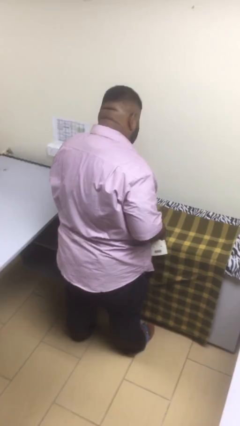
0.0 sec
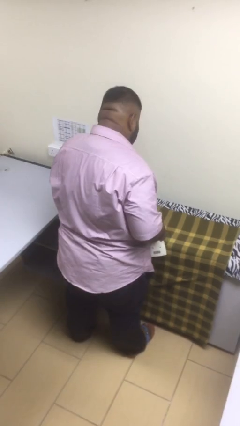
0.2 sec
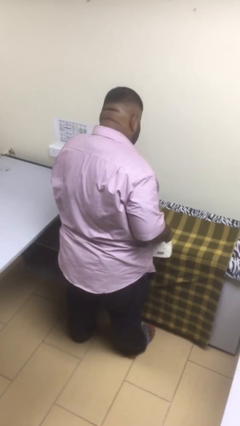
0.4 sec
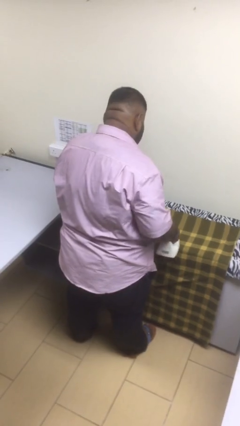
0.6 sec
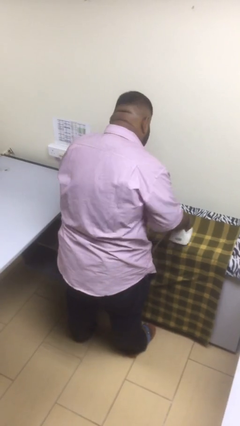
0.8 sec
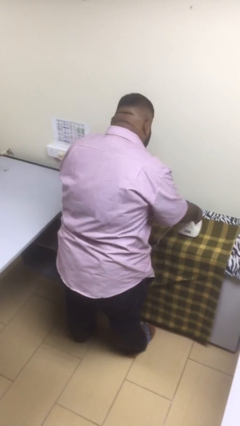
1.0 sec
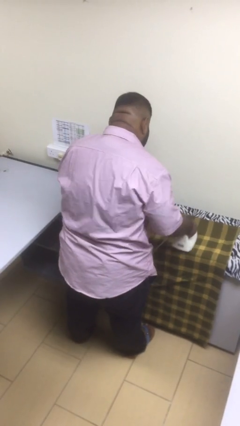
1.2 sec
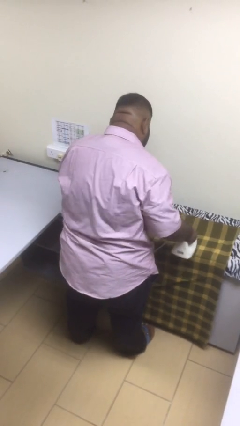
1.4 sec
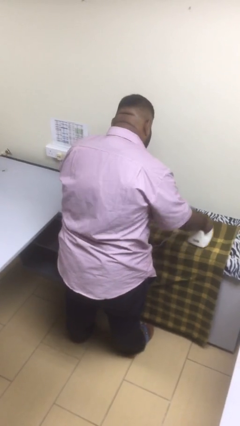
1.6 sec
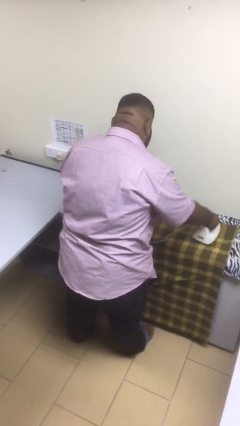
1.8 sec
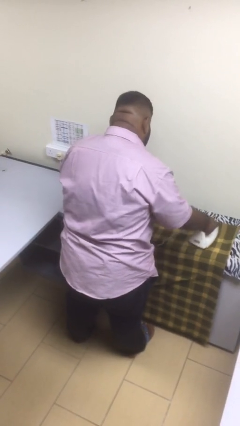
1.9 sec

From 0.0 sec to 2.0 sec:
person irons clothes

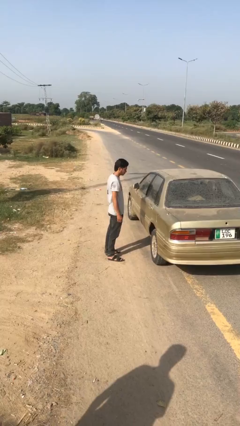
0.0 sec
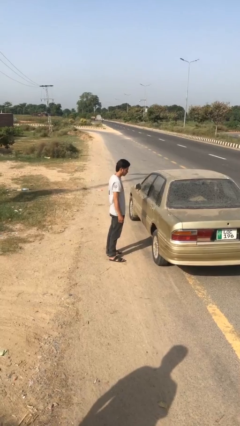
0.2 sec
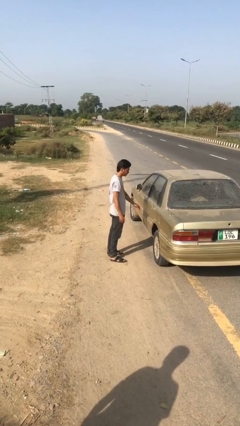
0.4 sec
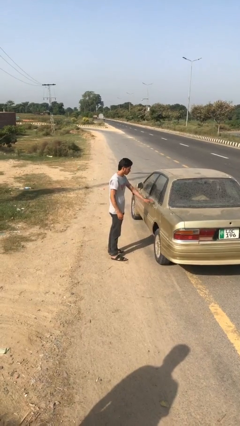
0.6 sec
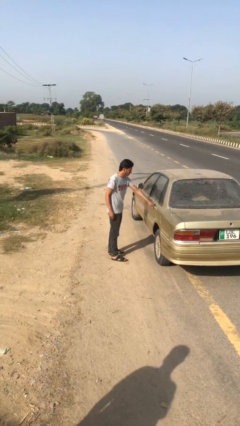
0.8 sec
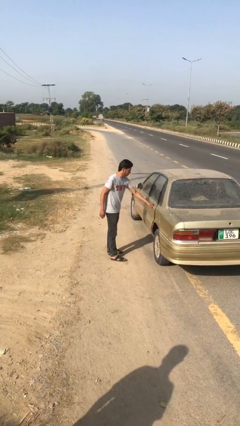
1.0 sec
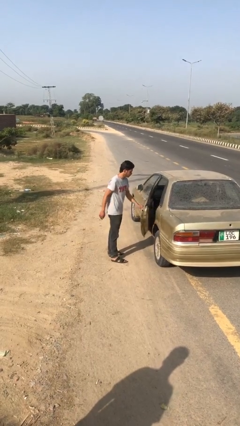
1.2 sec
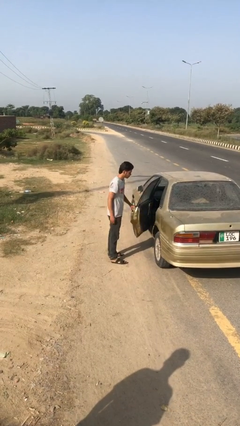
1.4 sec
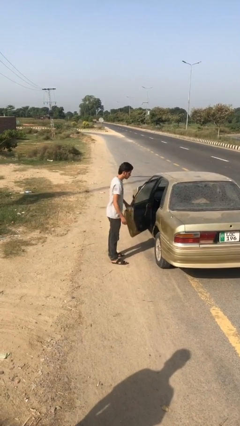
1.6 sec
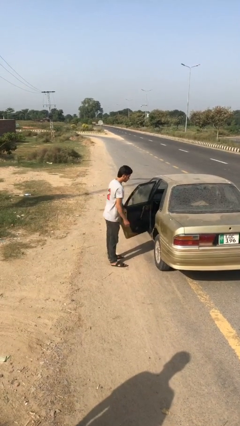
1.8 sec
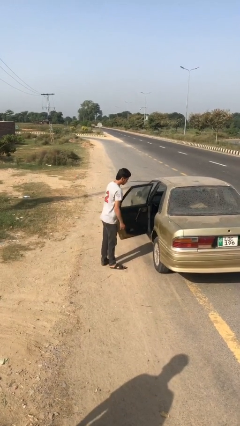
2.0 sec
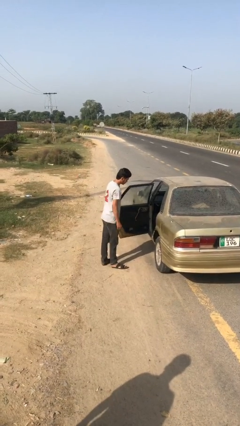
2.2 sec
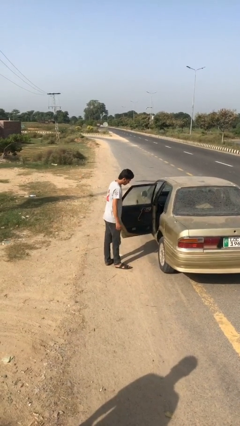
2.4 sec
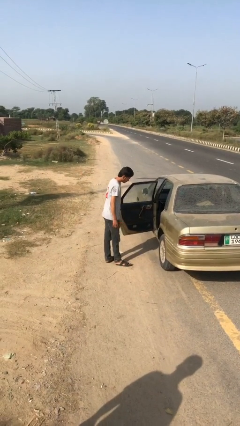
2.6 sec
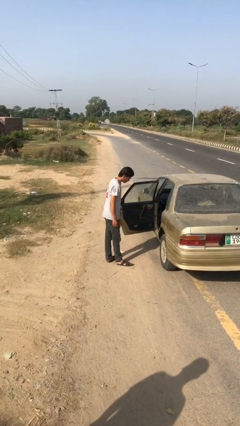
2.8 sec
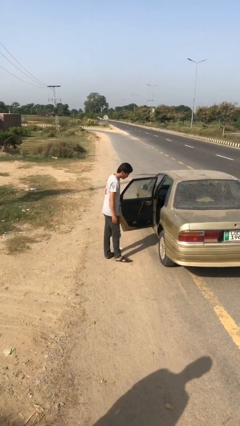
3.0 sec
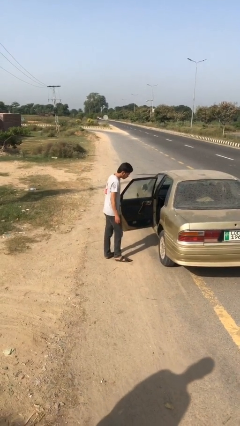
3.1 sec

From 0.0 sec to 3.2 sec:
person opens car door

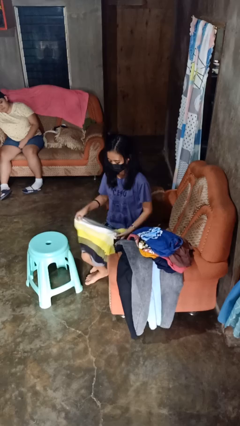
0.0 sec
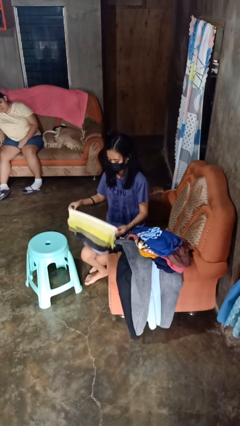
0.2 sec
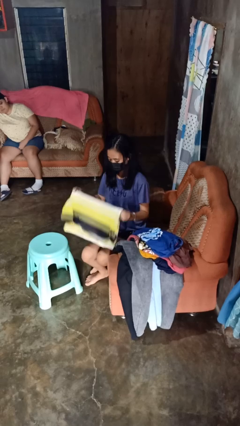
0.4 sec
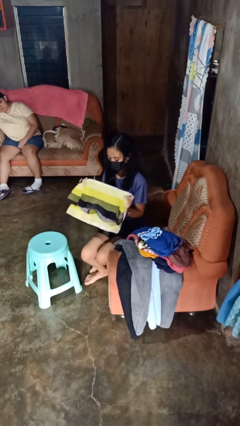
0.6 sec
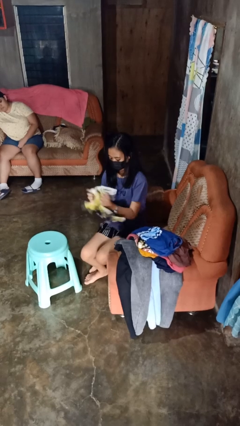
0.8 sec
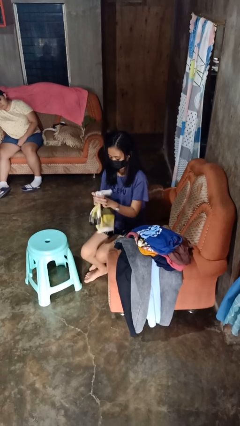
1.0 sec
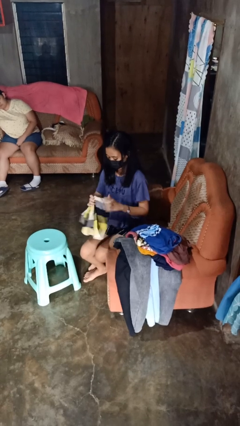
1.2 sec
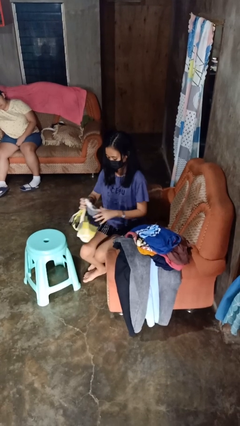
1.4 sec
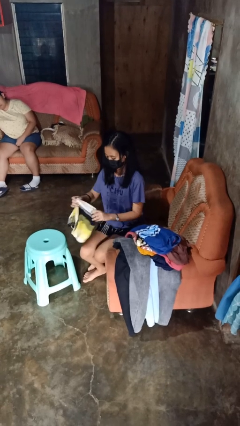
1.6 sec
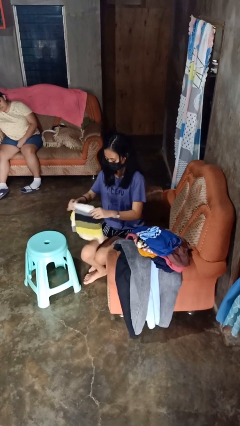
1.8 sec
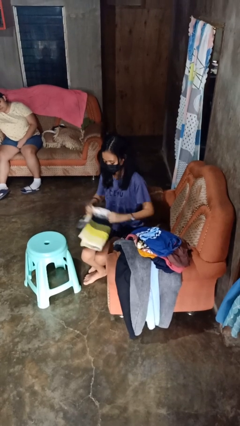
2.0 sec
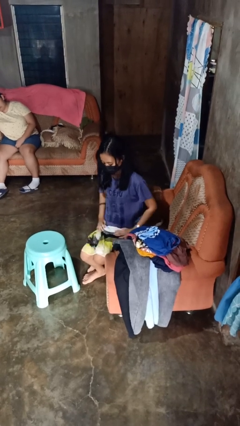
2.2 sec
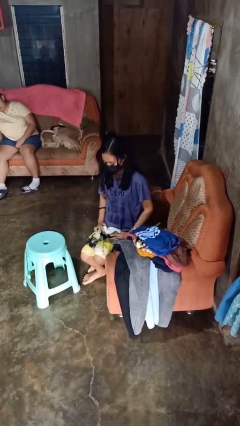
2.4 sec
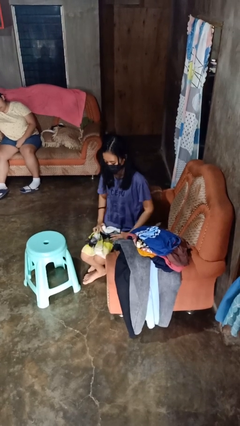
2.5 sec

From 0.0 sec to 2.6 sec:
person folds shirt

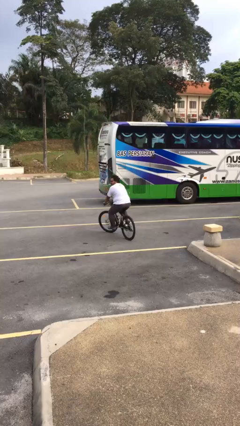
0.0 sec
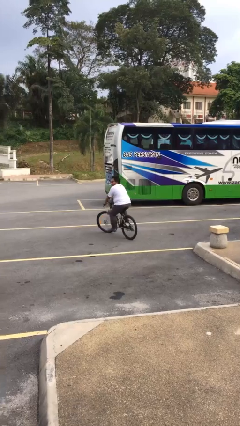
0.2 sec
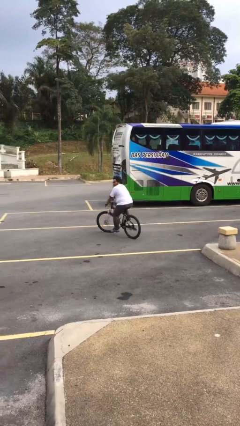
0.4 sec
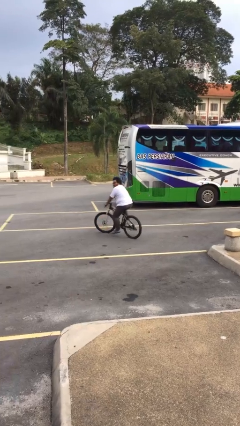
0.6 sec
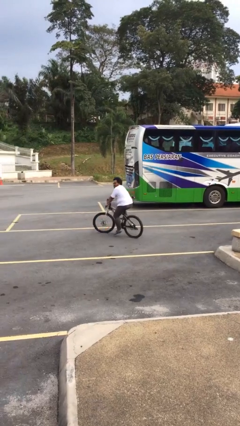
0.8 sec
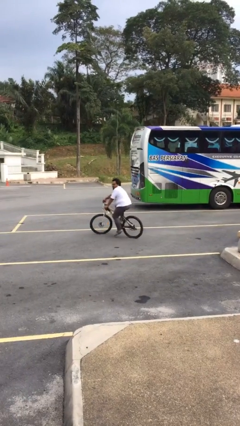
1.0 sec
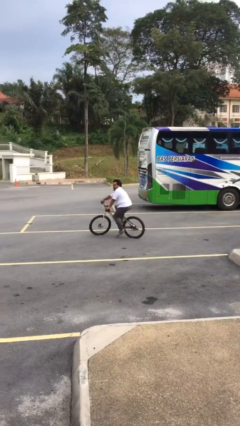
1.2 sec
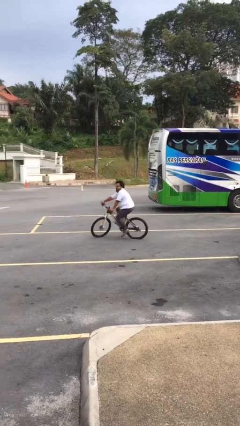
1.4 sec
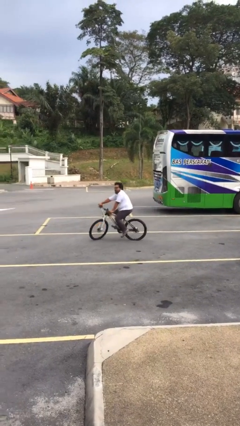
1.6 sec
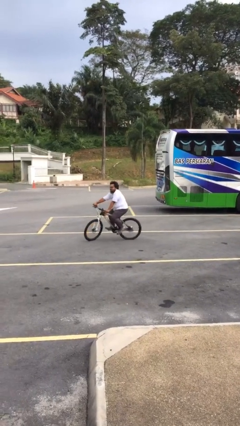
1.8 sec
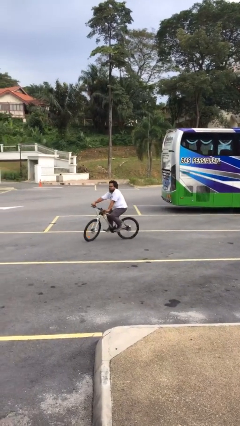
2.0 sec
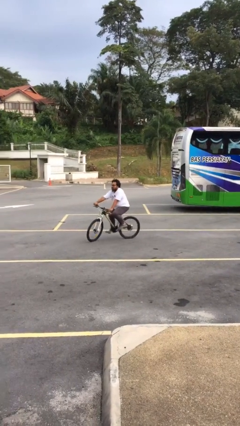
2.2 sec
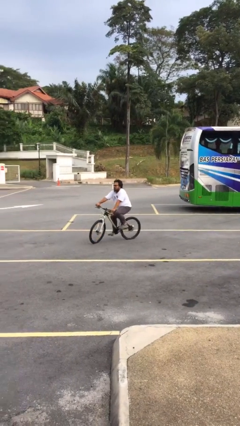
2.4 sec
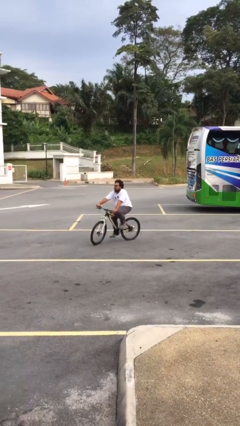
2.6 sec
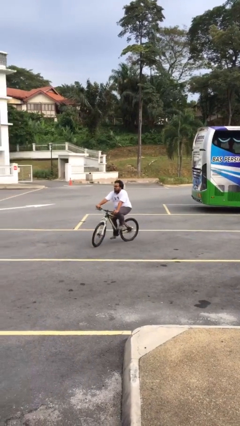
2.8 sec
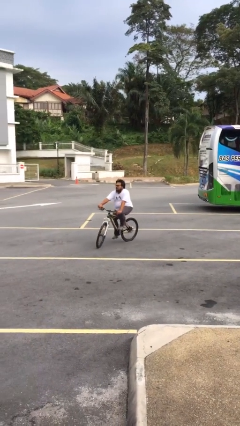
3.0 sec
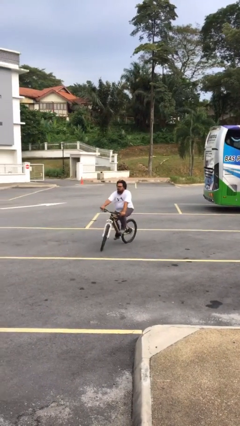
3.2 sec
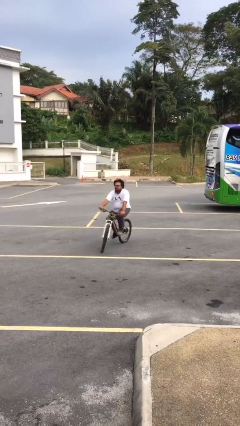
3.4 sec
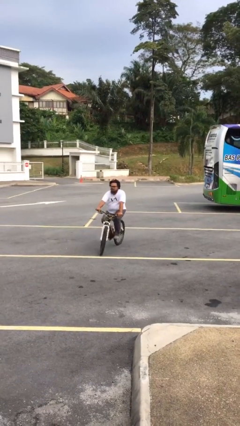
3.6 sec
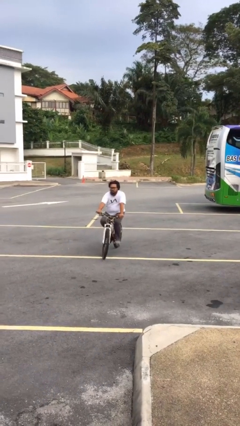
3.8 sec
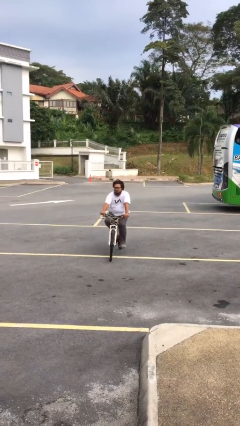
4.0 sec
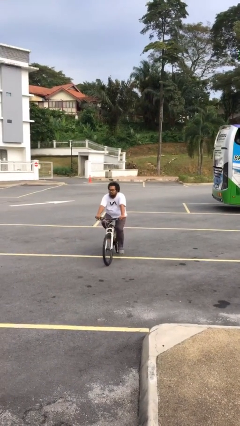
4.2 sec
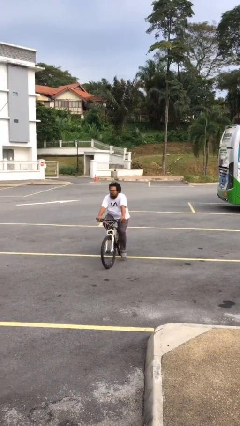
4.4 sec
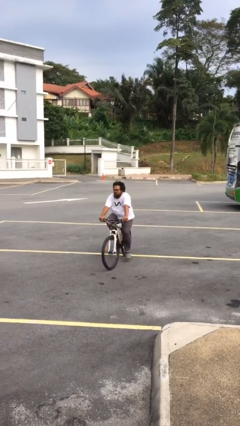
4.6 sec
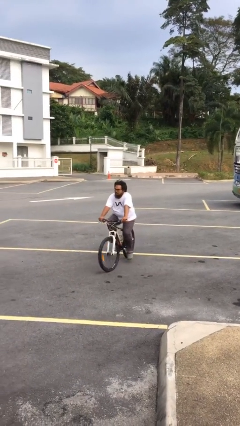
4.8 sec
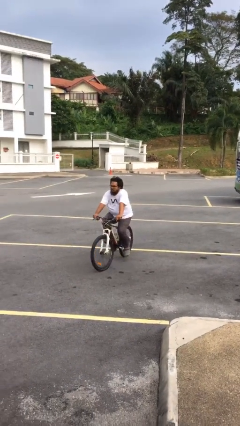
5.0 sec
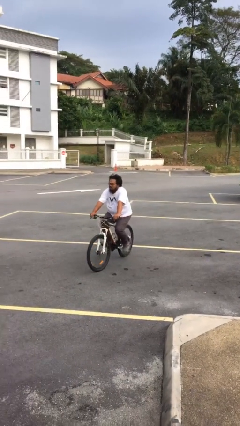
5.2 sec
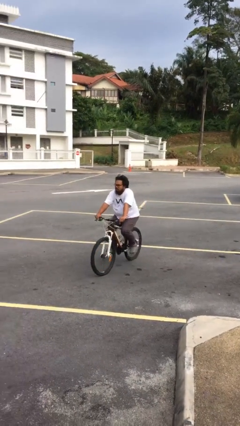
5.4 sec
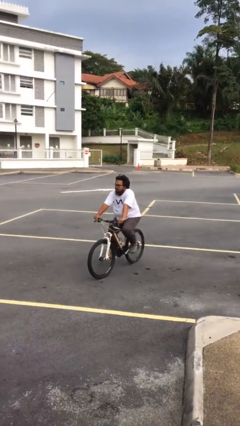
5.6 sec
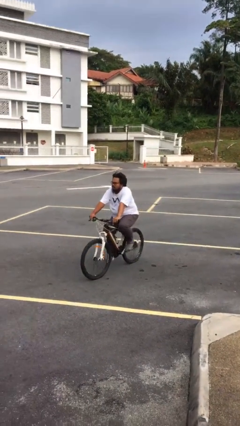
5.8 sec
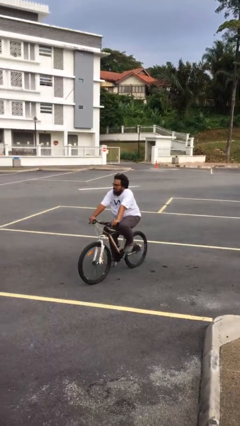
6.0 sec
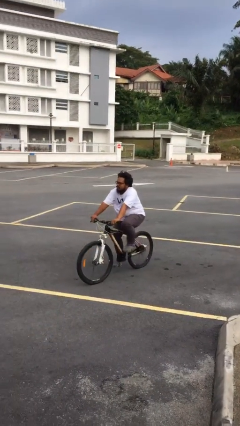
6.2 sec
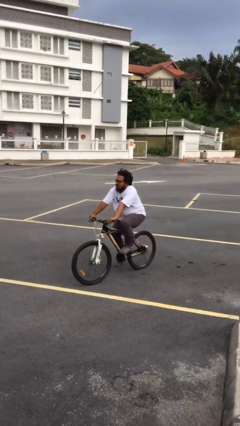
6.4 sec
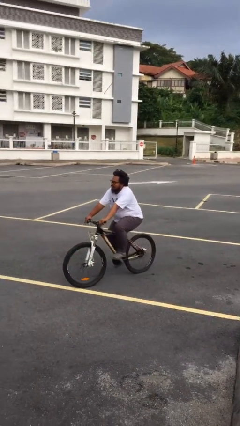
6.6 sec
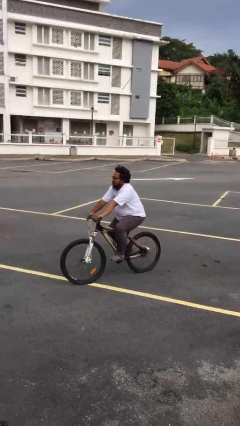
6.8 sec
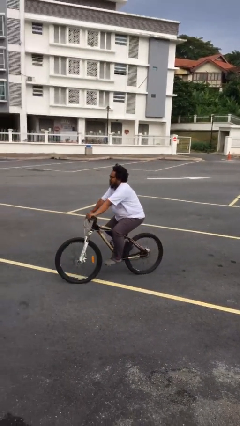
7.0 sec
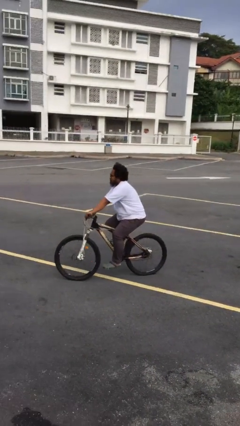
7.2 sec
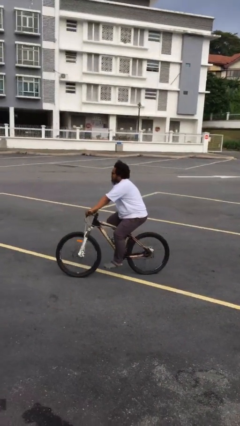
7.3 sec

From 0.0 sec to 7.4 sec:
person rides bicycle

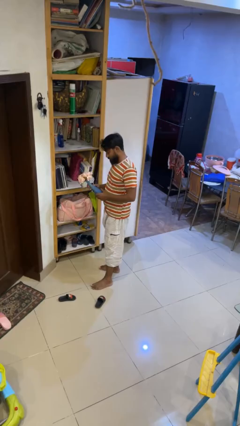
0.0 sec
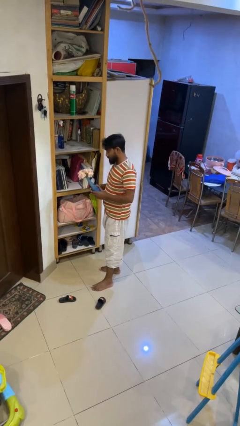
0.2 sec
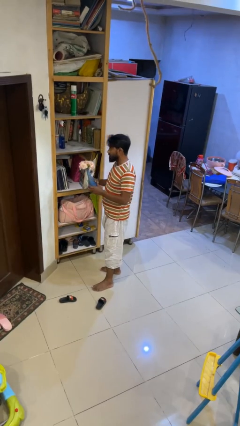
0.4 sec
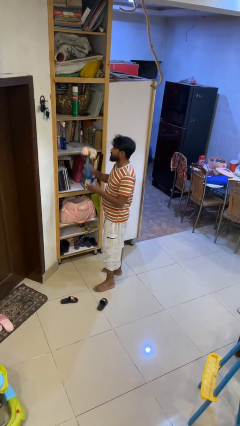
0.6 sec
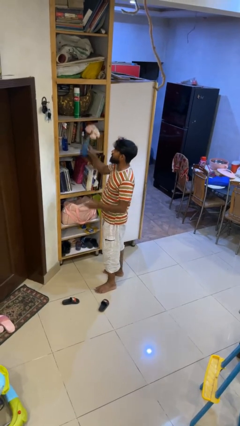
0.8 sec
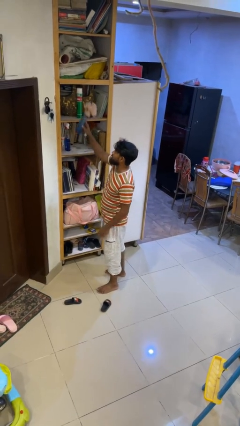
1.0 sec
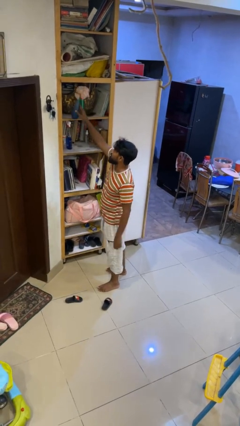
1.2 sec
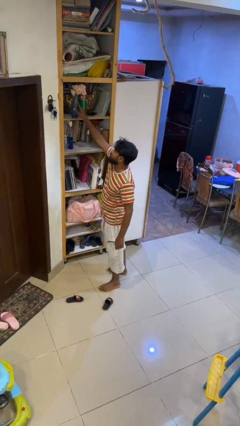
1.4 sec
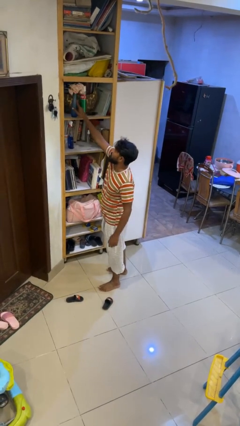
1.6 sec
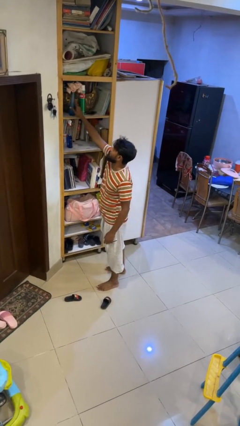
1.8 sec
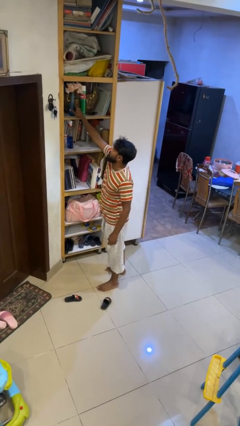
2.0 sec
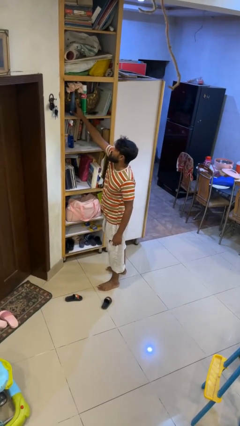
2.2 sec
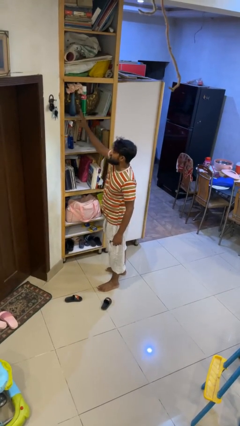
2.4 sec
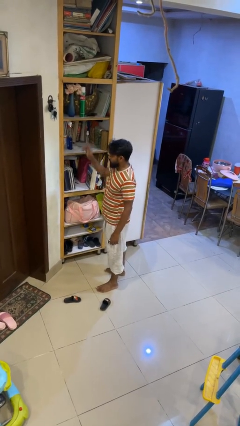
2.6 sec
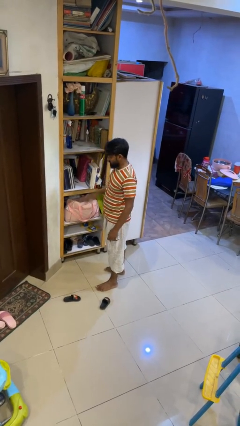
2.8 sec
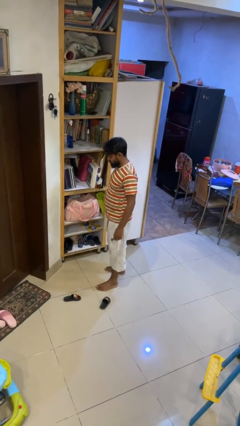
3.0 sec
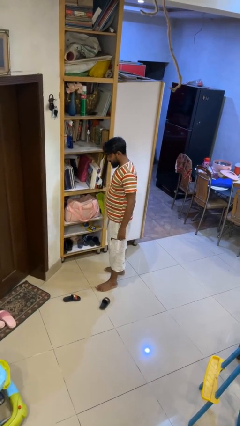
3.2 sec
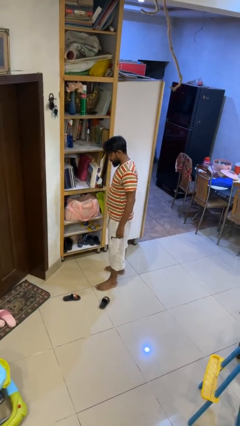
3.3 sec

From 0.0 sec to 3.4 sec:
person puts down object on shelf
